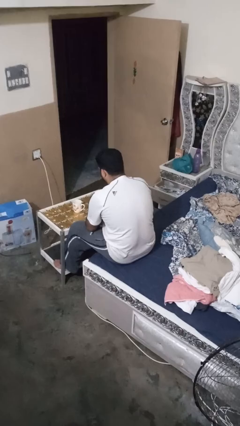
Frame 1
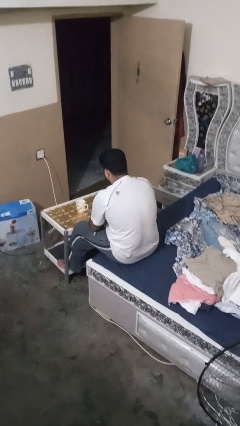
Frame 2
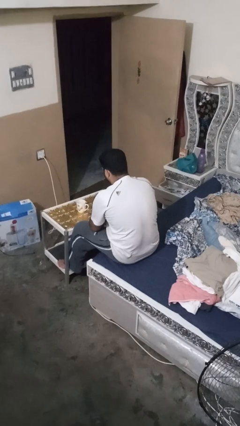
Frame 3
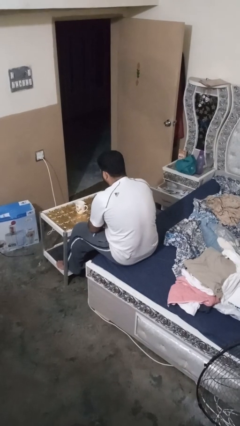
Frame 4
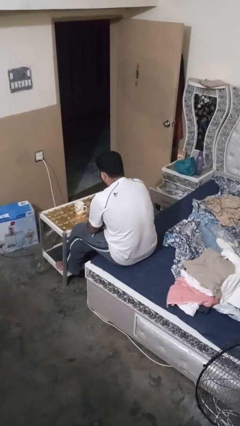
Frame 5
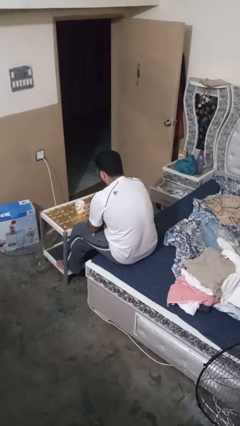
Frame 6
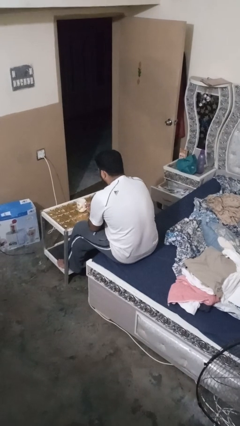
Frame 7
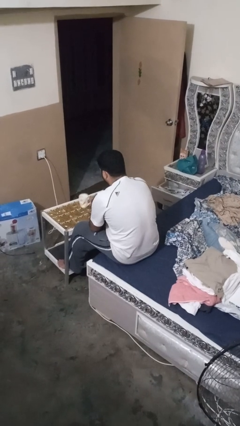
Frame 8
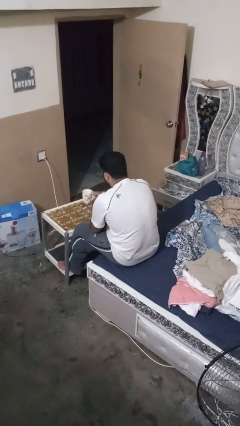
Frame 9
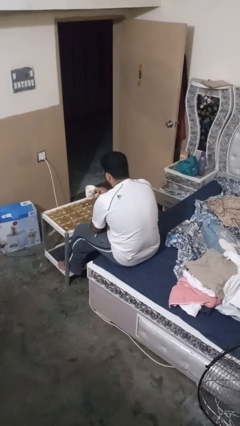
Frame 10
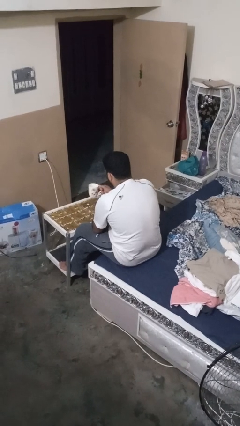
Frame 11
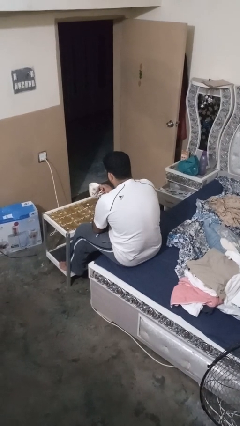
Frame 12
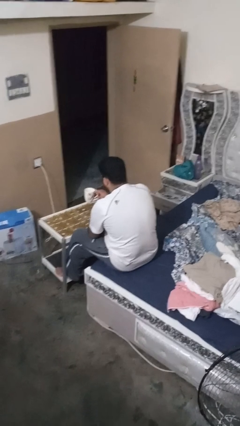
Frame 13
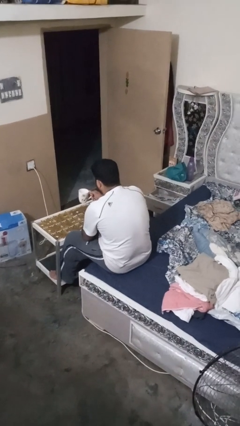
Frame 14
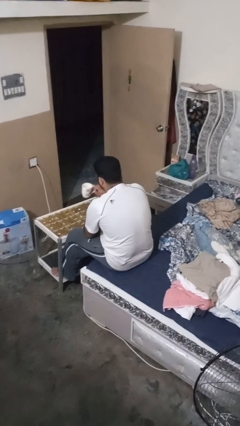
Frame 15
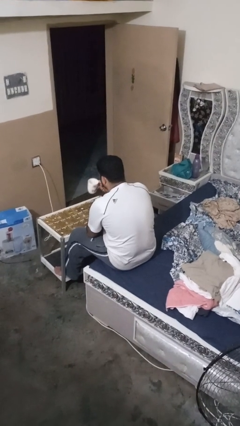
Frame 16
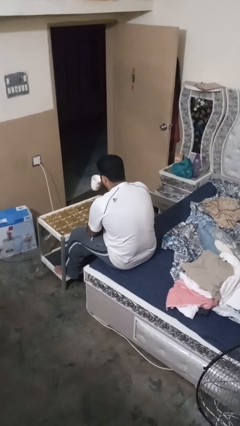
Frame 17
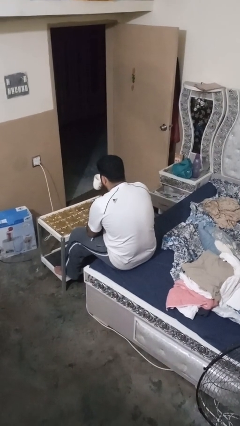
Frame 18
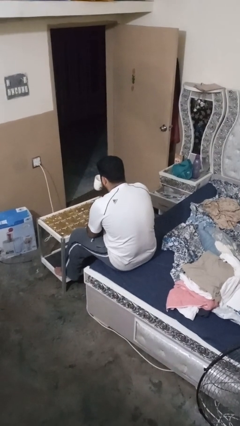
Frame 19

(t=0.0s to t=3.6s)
person picks up object from table

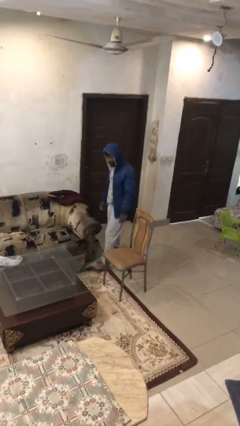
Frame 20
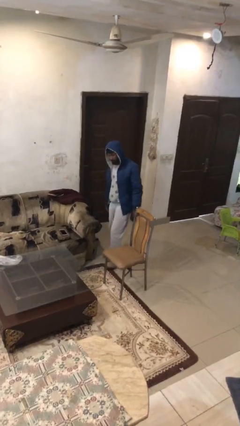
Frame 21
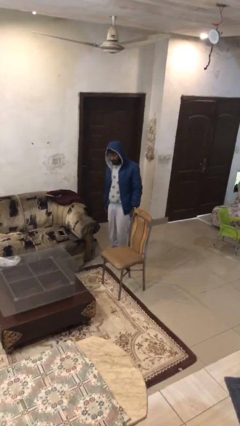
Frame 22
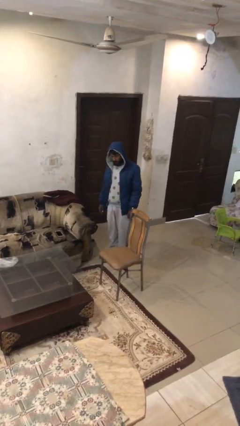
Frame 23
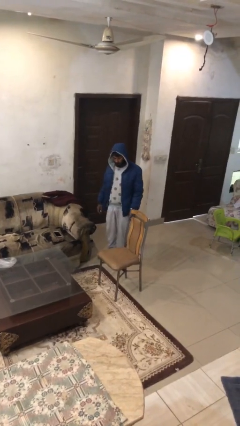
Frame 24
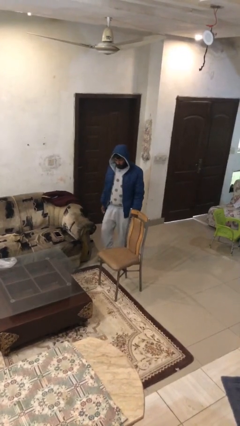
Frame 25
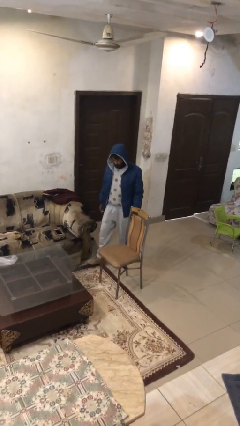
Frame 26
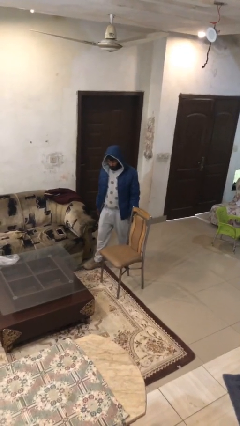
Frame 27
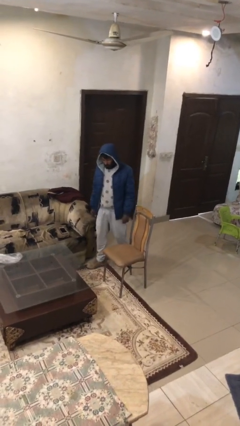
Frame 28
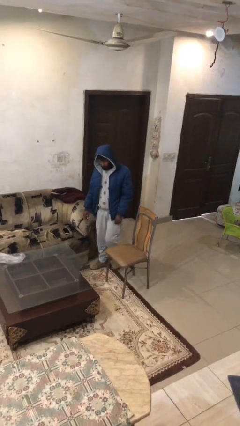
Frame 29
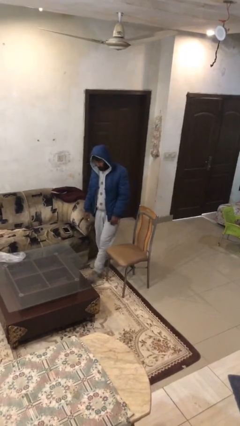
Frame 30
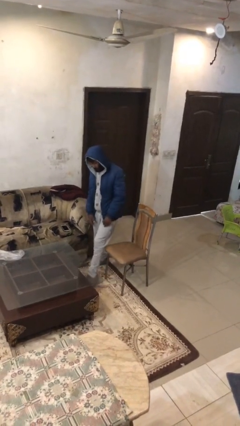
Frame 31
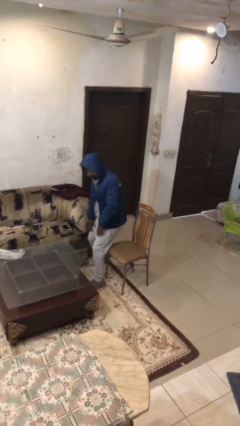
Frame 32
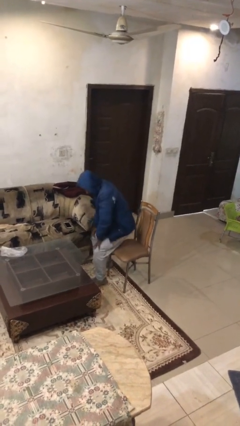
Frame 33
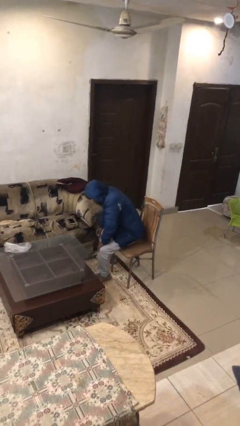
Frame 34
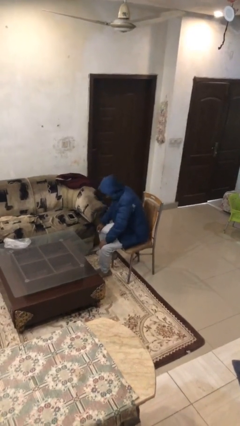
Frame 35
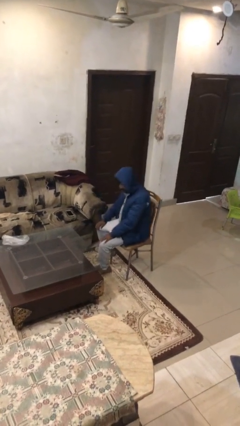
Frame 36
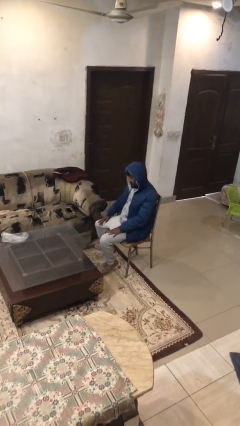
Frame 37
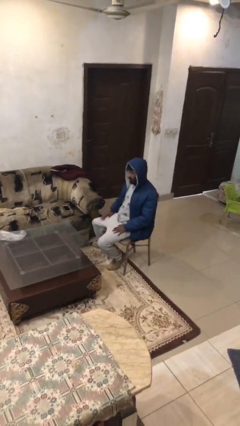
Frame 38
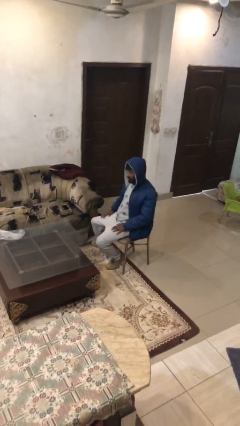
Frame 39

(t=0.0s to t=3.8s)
person sits down

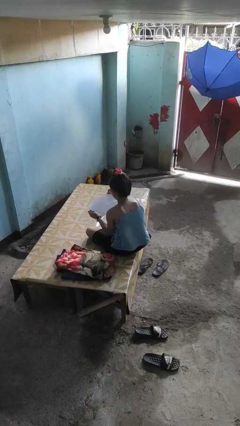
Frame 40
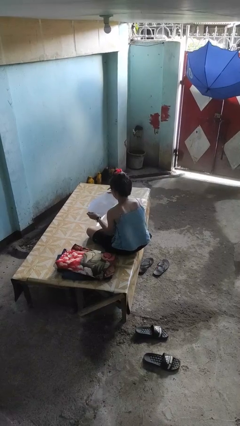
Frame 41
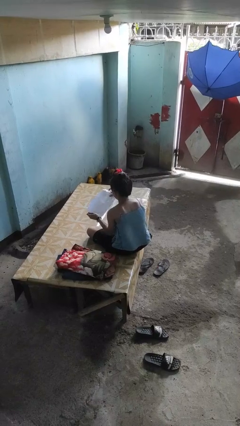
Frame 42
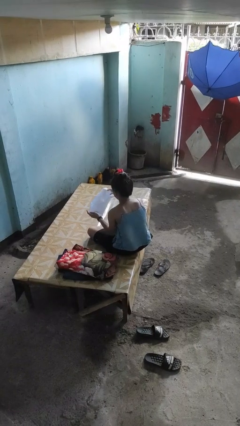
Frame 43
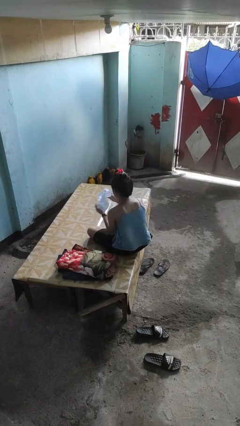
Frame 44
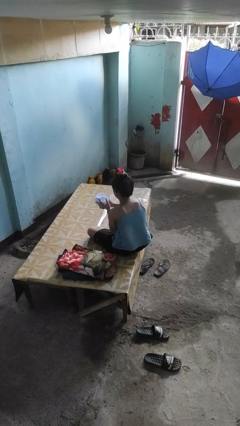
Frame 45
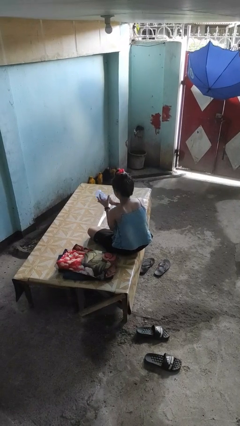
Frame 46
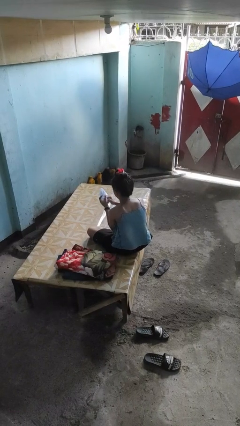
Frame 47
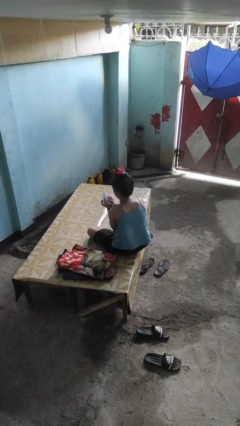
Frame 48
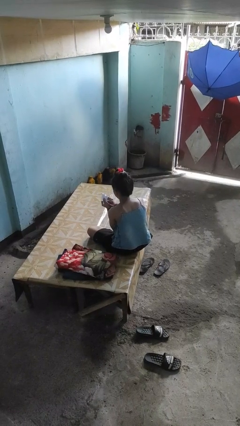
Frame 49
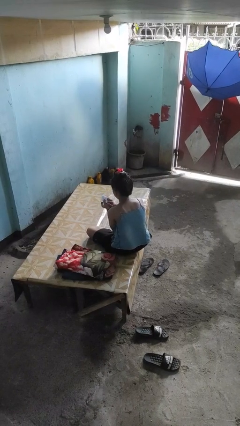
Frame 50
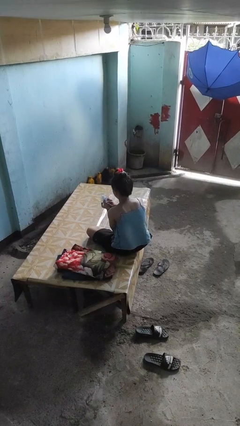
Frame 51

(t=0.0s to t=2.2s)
person crumples paper

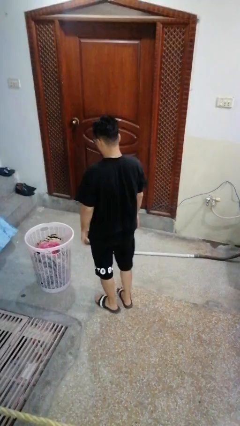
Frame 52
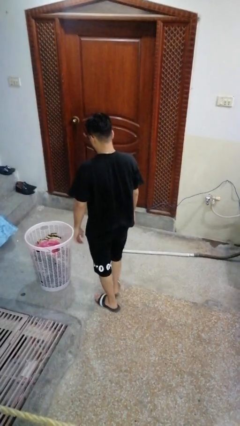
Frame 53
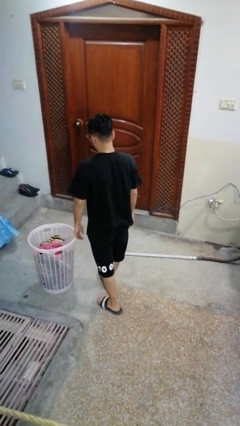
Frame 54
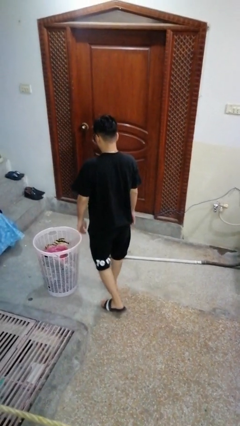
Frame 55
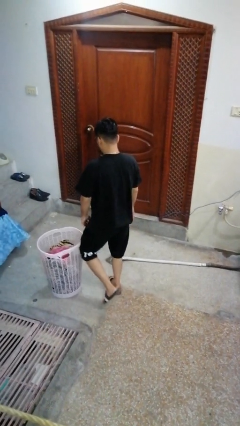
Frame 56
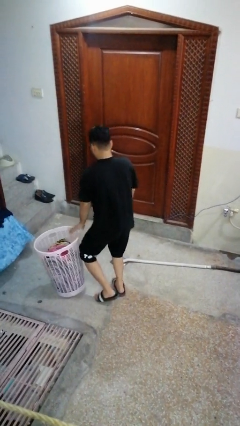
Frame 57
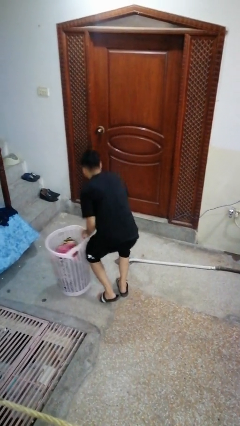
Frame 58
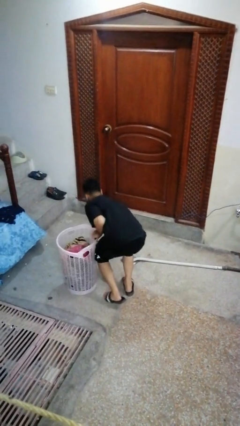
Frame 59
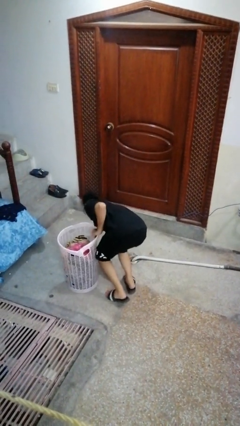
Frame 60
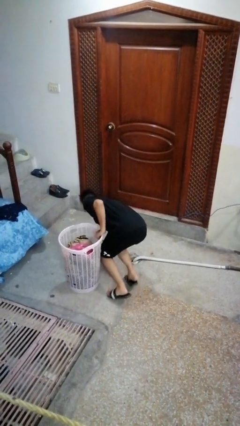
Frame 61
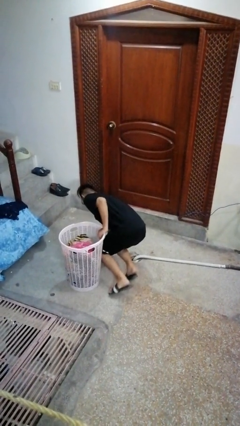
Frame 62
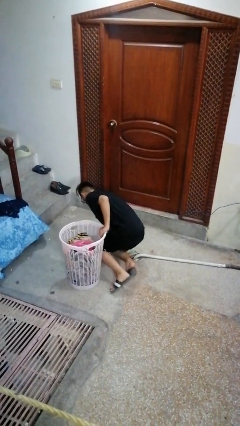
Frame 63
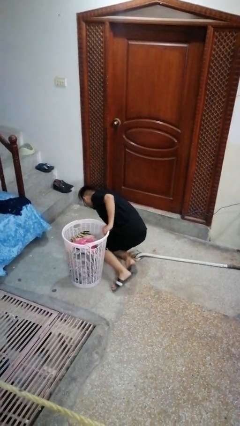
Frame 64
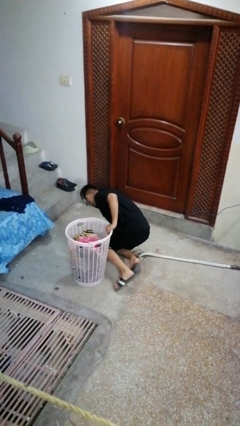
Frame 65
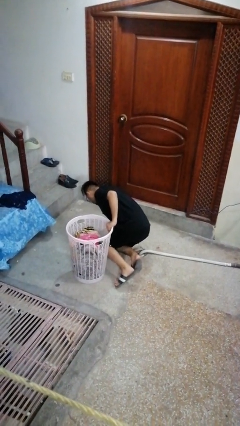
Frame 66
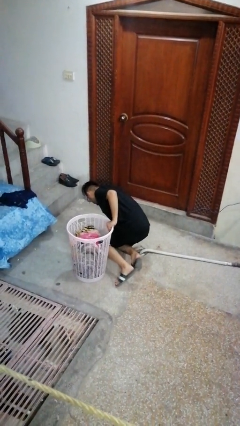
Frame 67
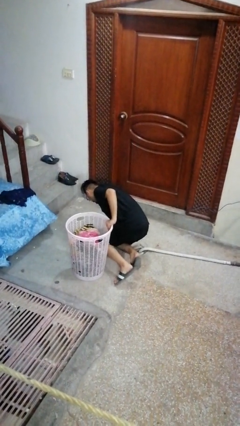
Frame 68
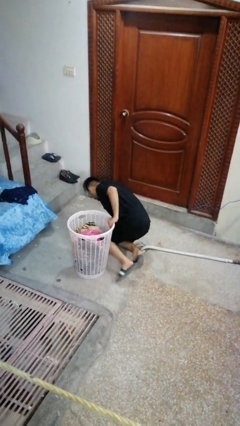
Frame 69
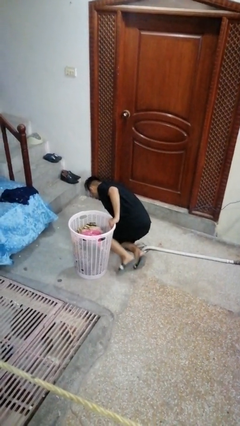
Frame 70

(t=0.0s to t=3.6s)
person trips on object on floor

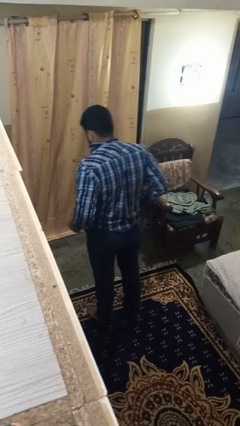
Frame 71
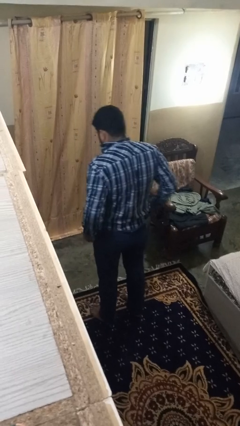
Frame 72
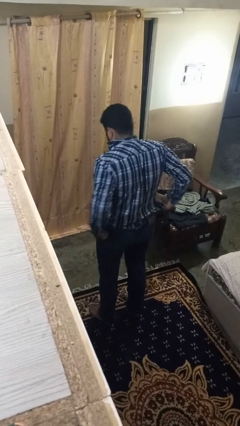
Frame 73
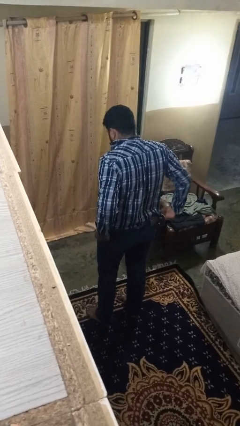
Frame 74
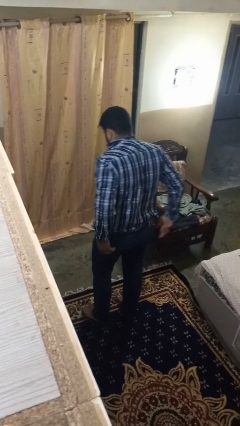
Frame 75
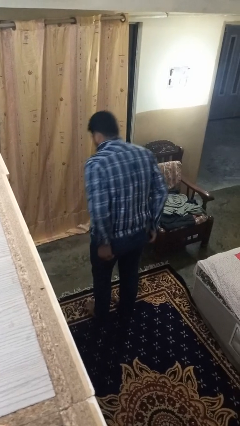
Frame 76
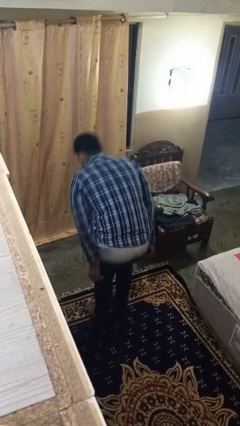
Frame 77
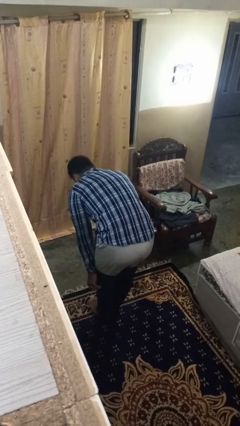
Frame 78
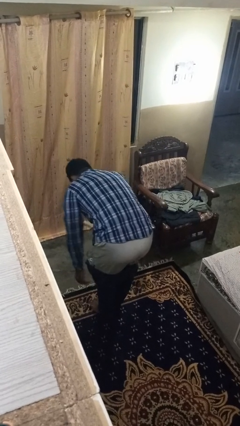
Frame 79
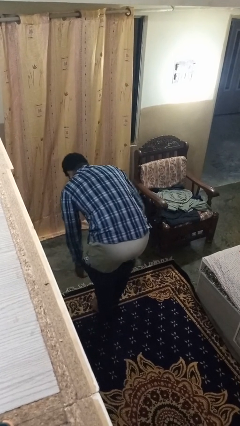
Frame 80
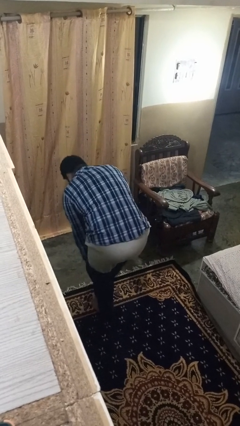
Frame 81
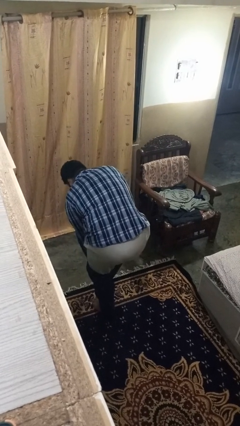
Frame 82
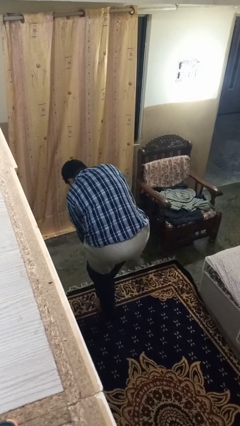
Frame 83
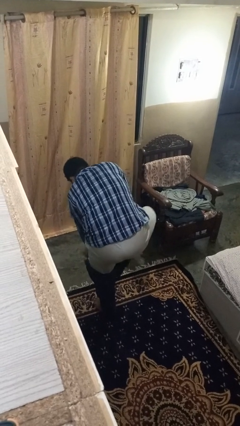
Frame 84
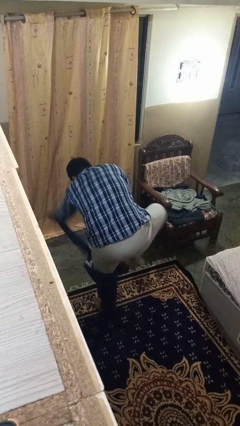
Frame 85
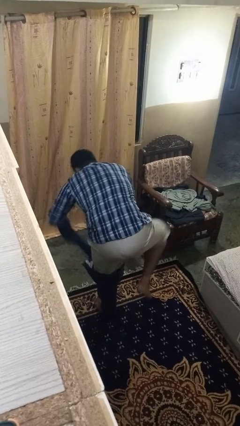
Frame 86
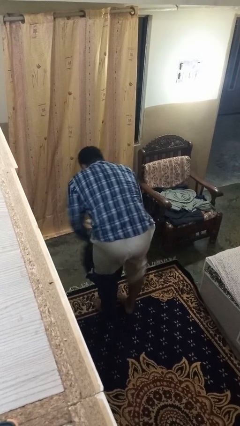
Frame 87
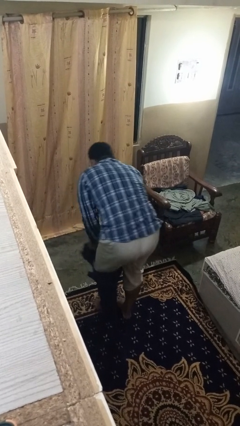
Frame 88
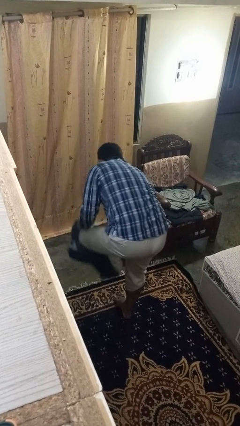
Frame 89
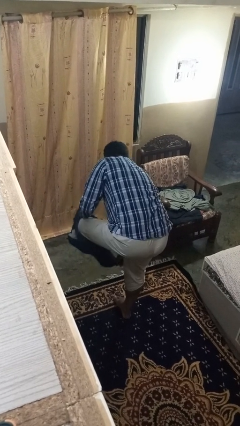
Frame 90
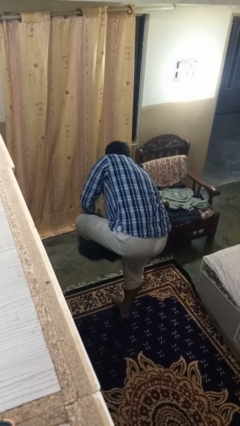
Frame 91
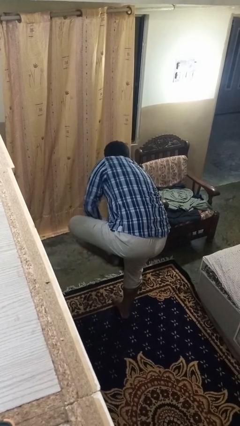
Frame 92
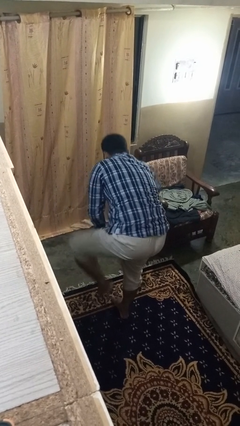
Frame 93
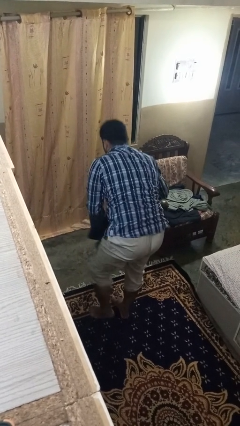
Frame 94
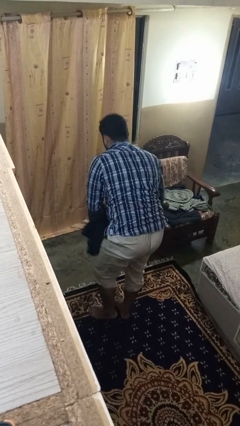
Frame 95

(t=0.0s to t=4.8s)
person takes off pants
